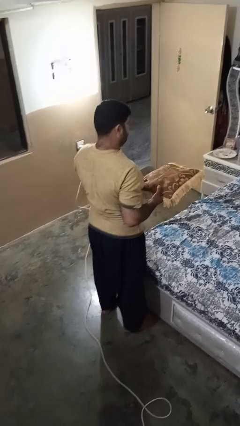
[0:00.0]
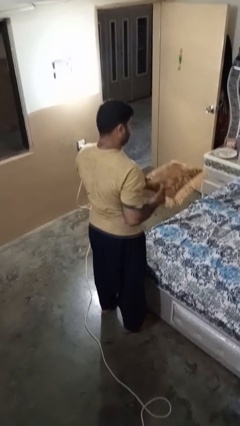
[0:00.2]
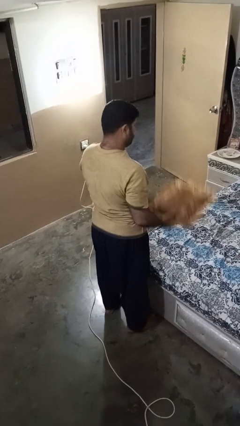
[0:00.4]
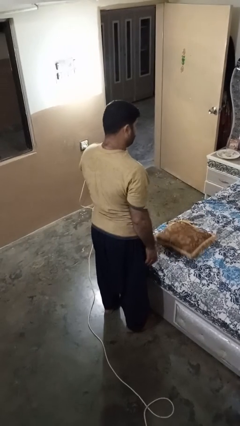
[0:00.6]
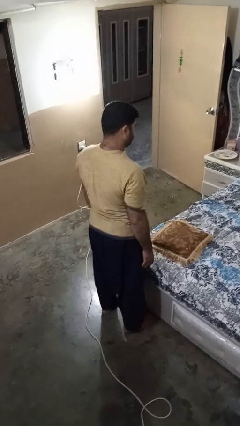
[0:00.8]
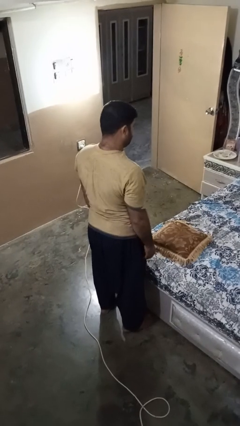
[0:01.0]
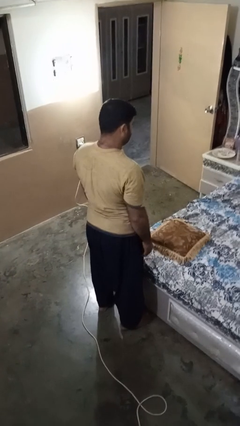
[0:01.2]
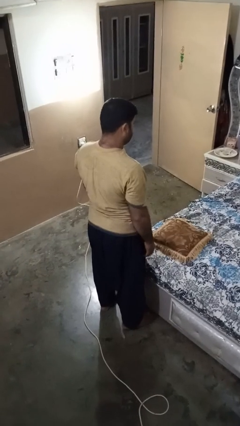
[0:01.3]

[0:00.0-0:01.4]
person puts down object on bed

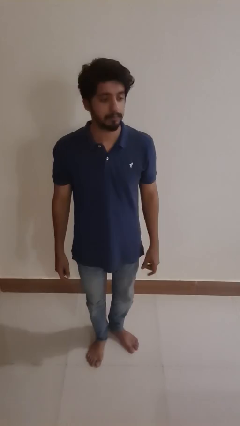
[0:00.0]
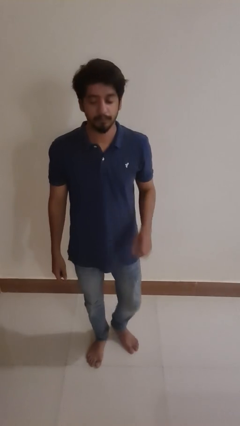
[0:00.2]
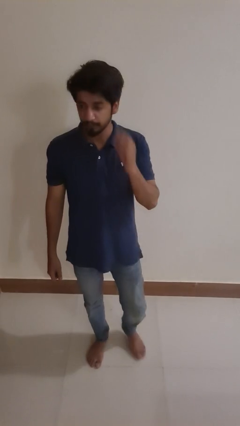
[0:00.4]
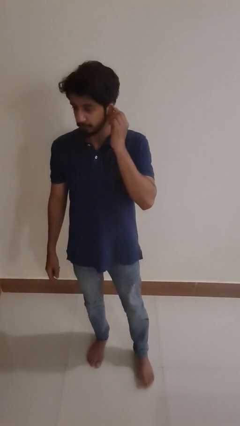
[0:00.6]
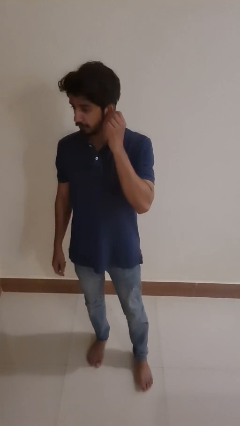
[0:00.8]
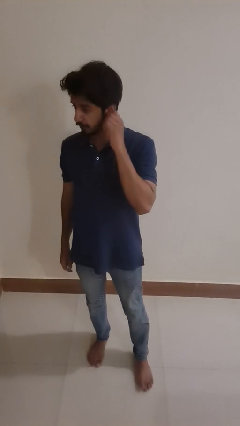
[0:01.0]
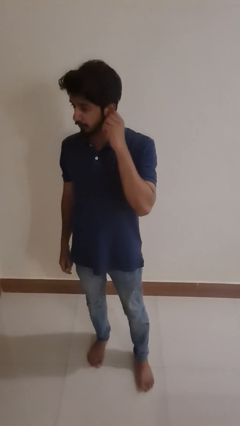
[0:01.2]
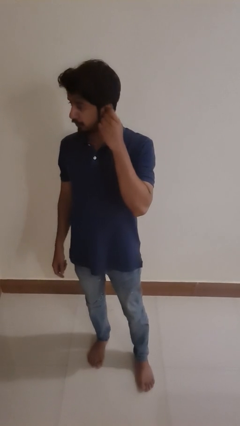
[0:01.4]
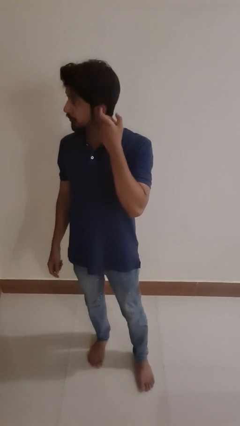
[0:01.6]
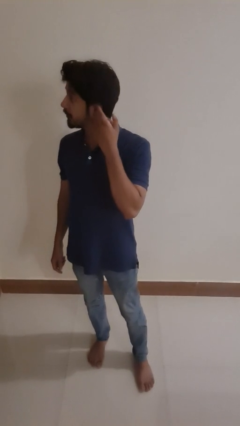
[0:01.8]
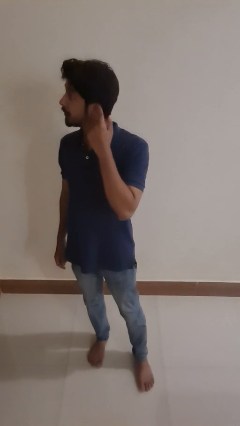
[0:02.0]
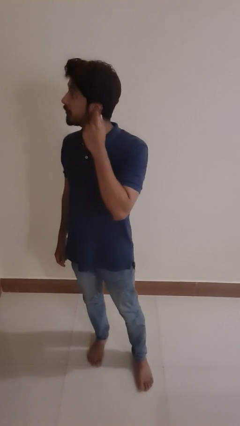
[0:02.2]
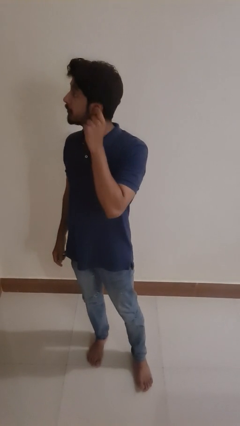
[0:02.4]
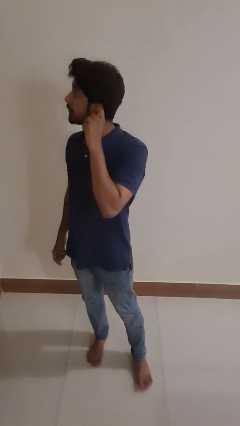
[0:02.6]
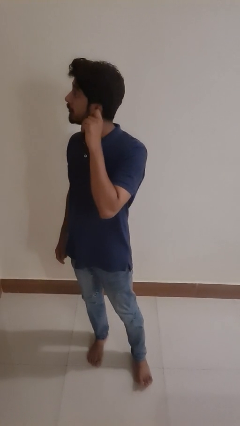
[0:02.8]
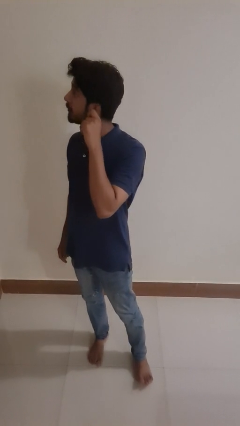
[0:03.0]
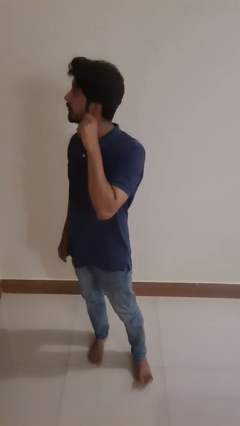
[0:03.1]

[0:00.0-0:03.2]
person touches earlobe

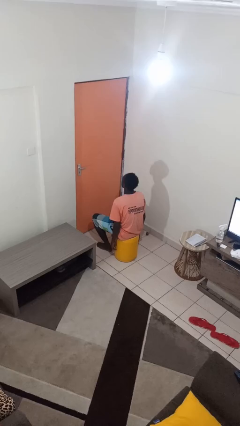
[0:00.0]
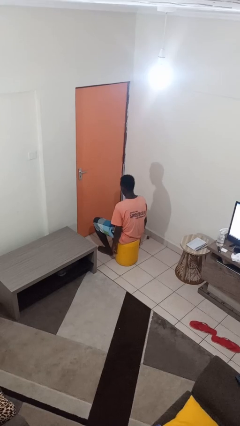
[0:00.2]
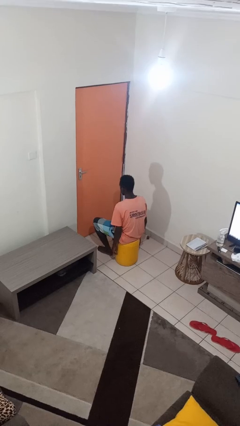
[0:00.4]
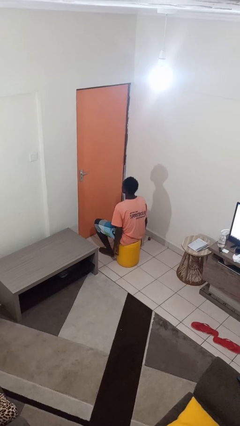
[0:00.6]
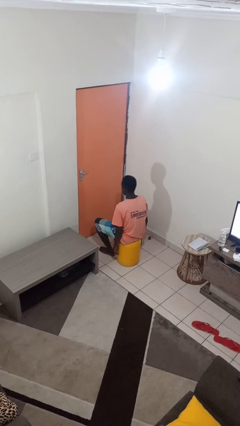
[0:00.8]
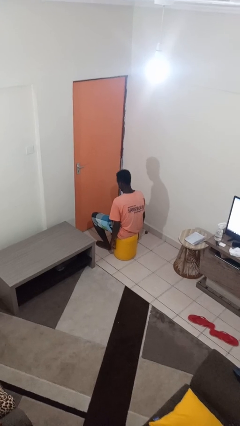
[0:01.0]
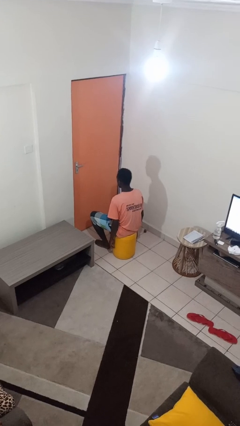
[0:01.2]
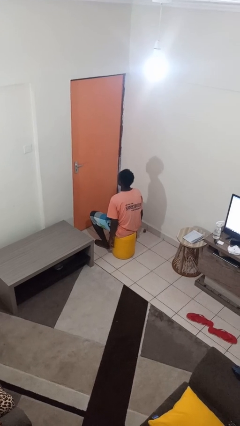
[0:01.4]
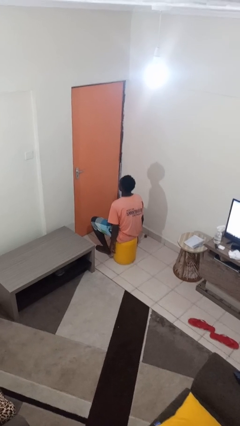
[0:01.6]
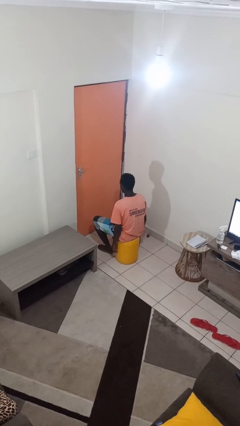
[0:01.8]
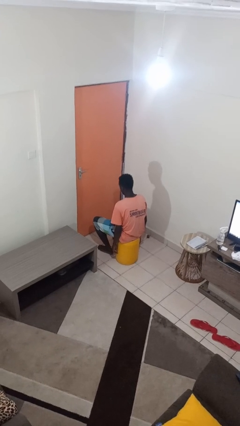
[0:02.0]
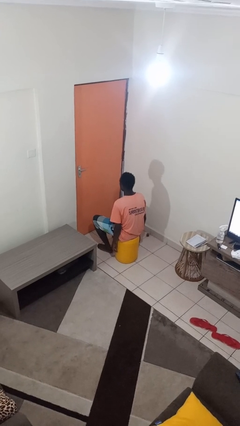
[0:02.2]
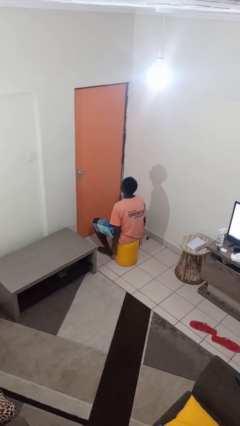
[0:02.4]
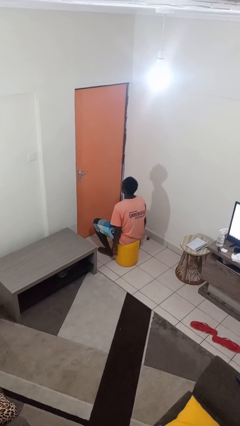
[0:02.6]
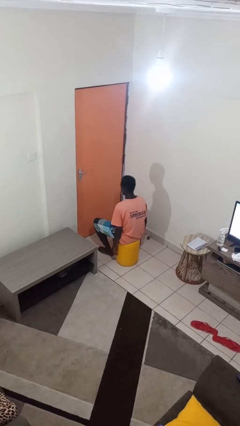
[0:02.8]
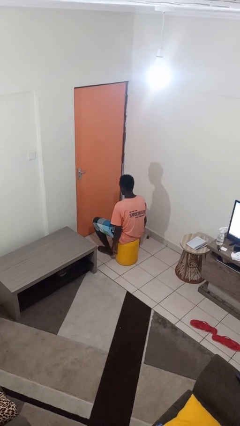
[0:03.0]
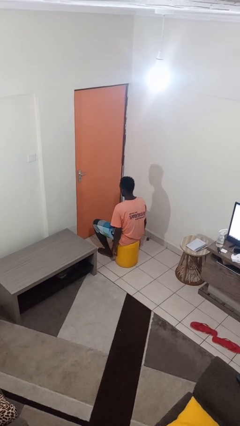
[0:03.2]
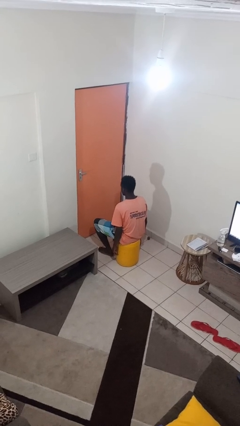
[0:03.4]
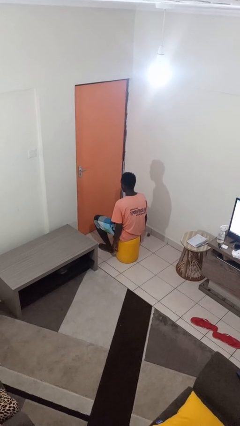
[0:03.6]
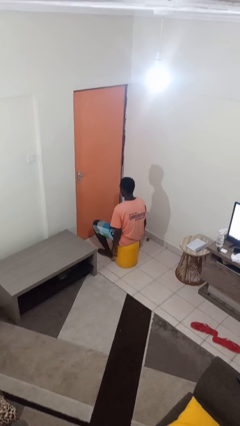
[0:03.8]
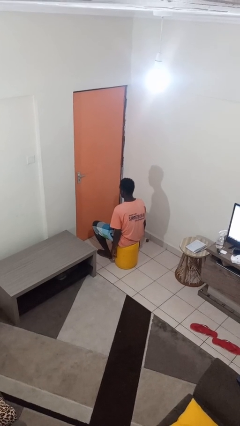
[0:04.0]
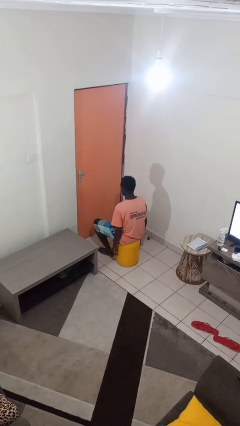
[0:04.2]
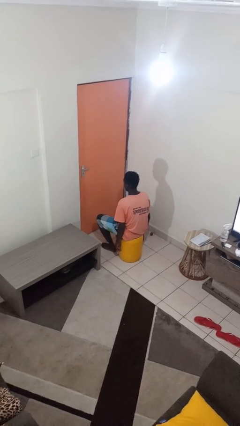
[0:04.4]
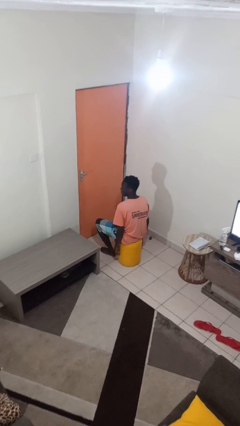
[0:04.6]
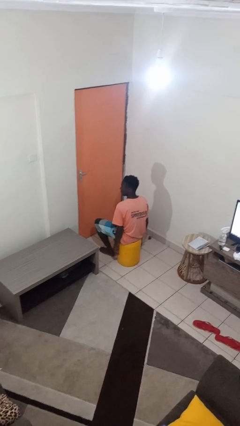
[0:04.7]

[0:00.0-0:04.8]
person nods head

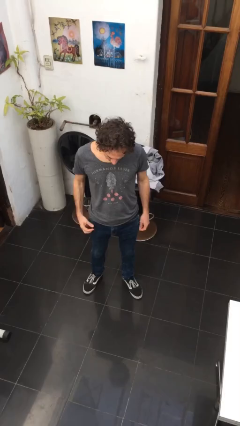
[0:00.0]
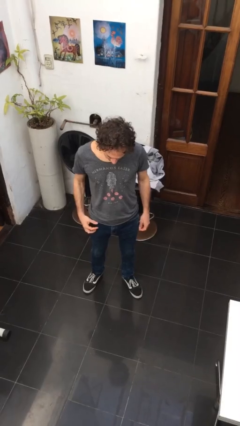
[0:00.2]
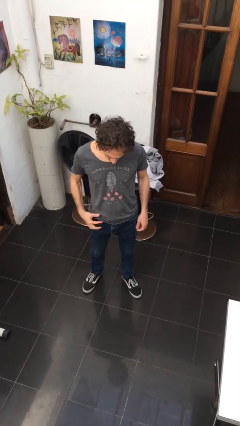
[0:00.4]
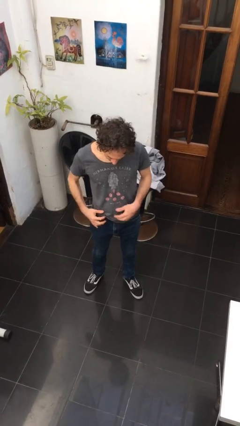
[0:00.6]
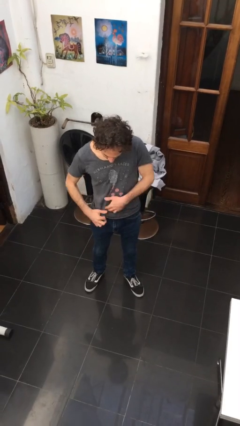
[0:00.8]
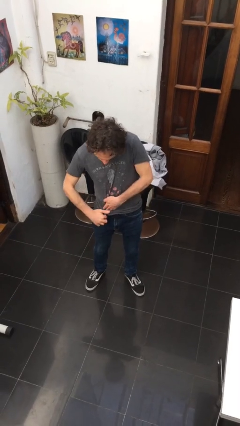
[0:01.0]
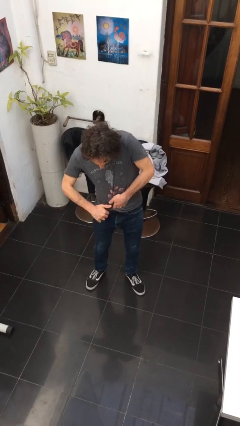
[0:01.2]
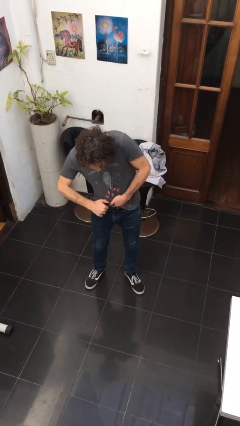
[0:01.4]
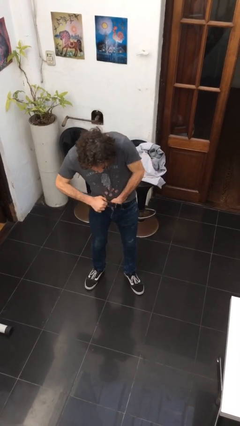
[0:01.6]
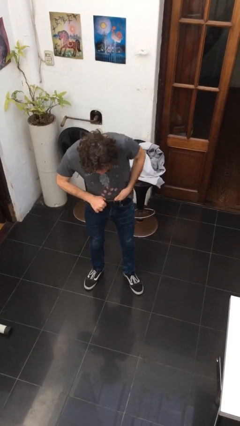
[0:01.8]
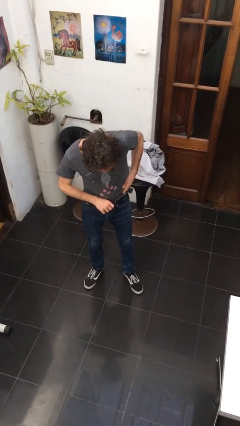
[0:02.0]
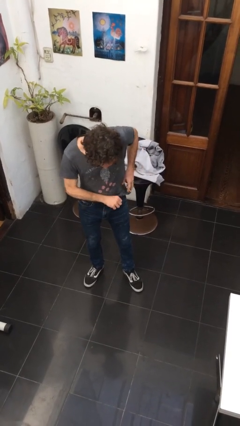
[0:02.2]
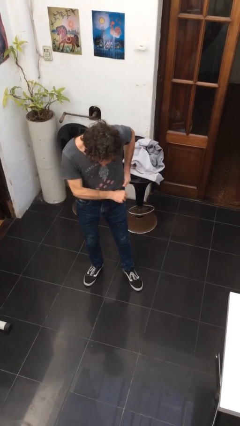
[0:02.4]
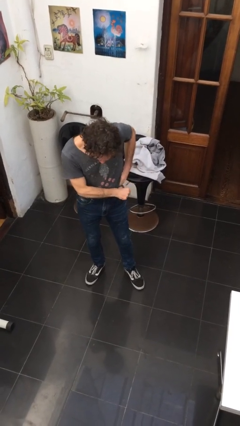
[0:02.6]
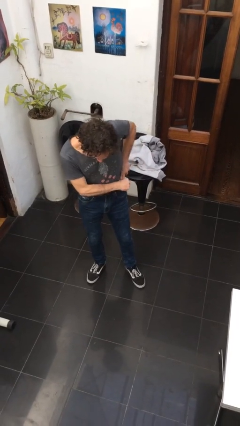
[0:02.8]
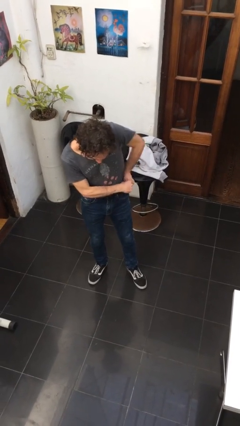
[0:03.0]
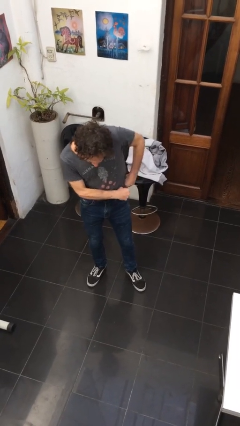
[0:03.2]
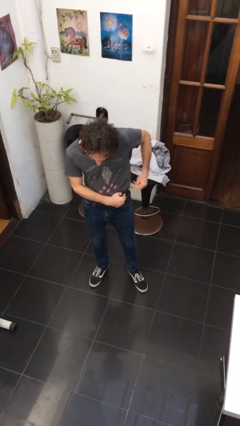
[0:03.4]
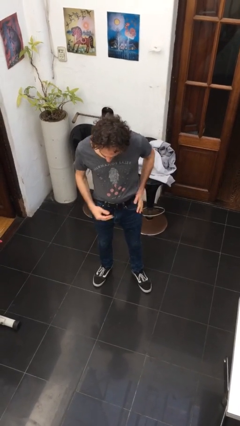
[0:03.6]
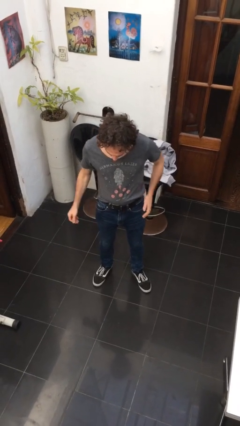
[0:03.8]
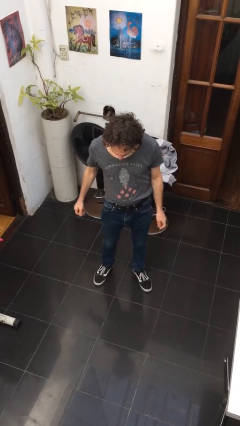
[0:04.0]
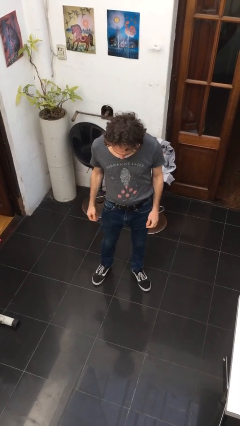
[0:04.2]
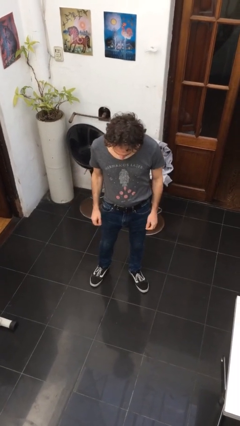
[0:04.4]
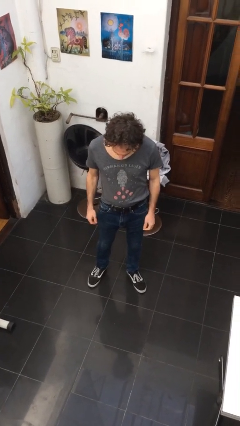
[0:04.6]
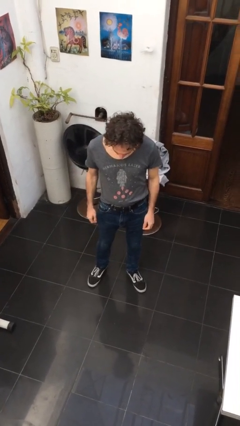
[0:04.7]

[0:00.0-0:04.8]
person tucks in shirt

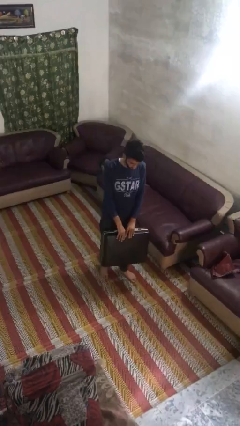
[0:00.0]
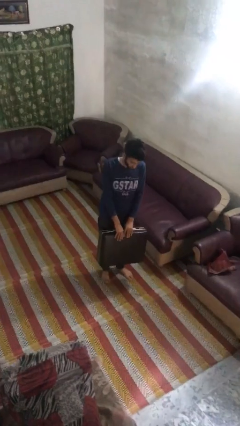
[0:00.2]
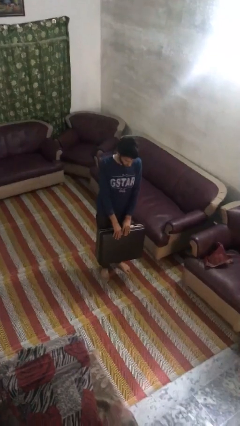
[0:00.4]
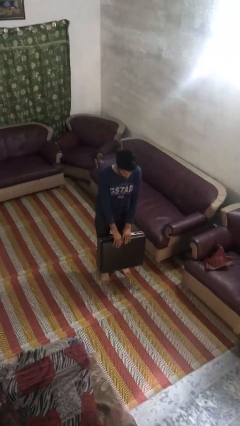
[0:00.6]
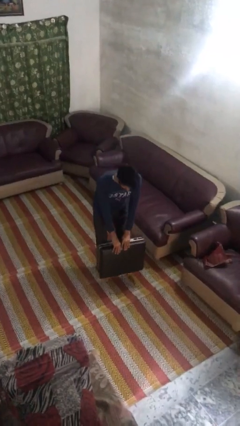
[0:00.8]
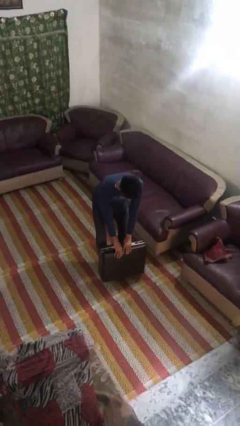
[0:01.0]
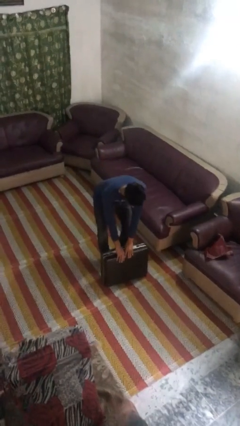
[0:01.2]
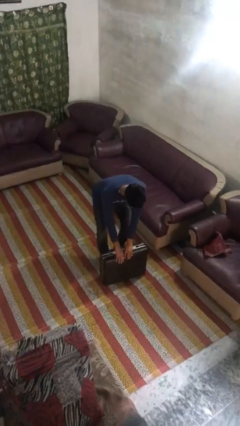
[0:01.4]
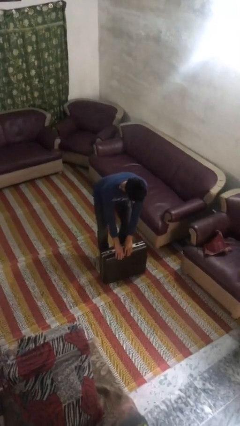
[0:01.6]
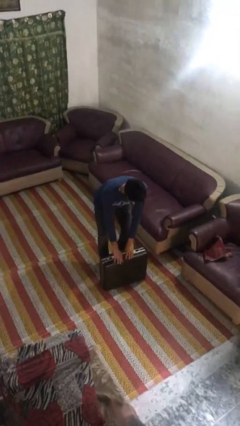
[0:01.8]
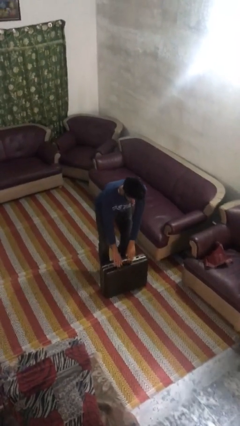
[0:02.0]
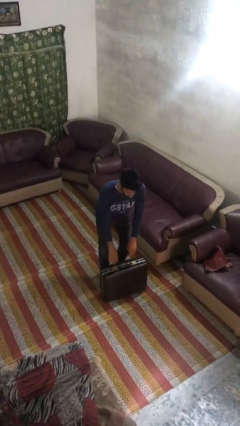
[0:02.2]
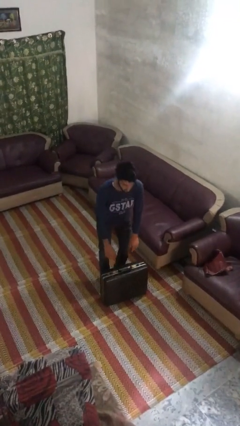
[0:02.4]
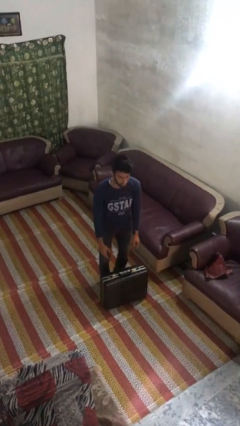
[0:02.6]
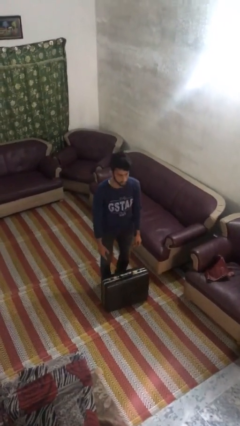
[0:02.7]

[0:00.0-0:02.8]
person puts down object on floor

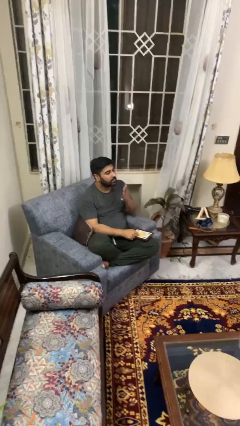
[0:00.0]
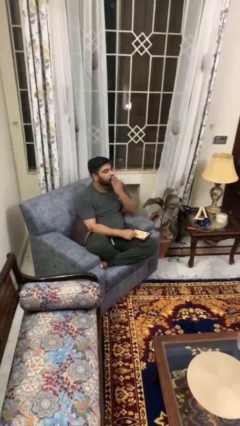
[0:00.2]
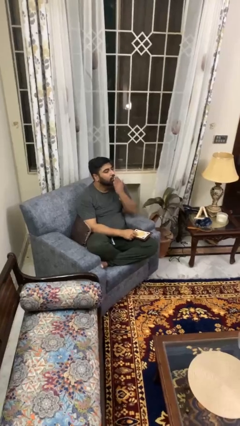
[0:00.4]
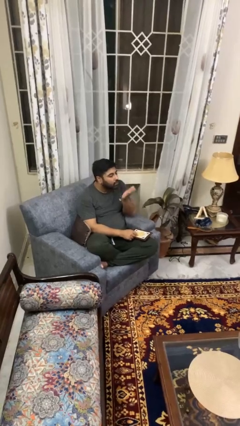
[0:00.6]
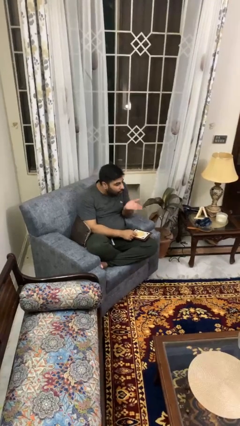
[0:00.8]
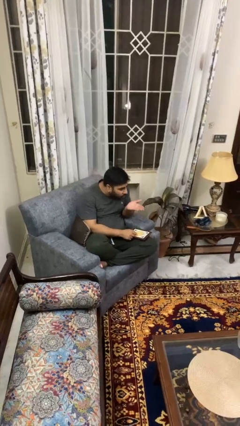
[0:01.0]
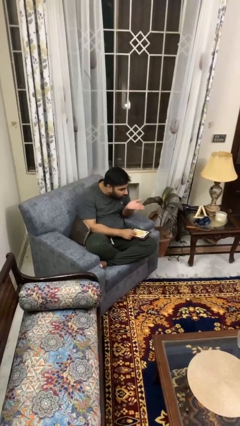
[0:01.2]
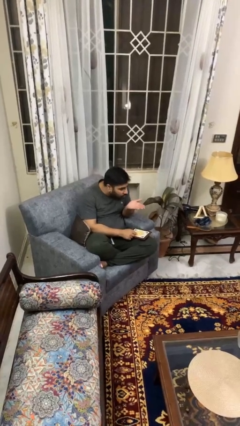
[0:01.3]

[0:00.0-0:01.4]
person gestures blow kiss
